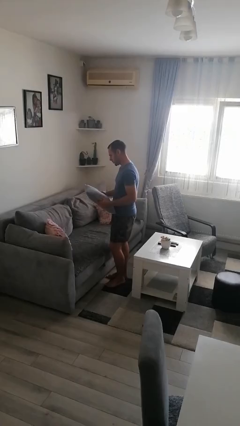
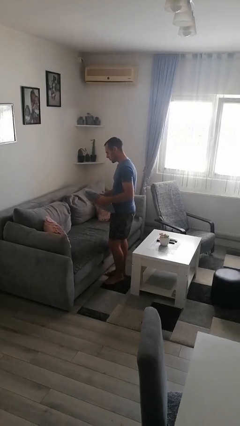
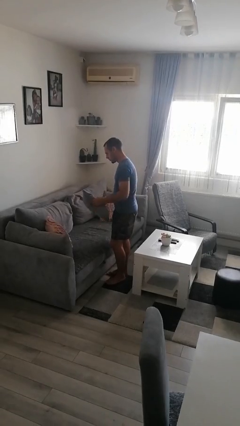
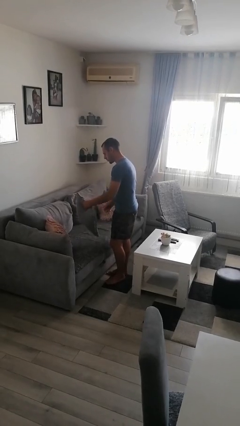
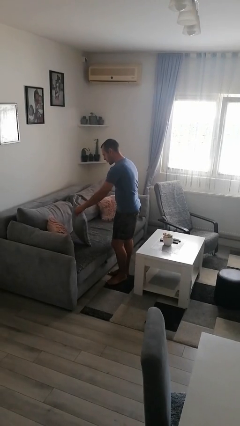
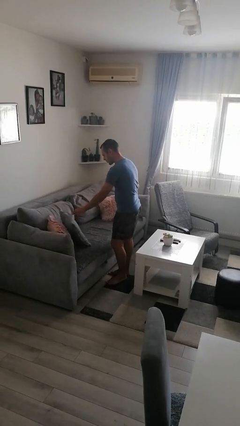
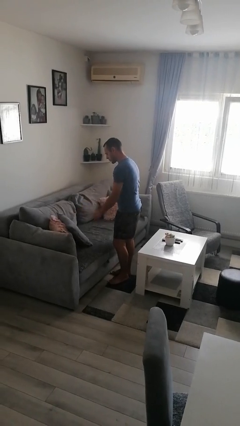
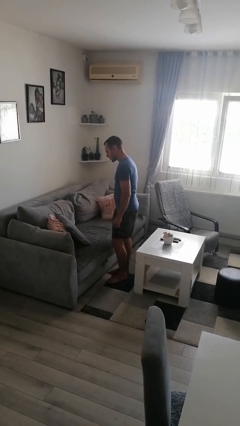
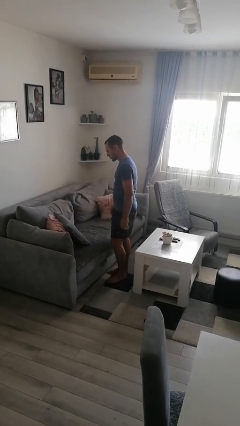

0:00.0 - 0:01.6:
person puts down object on couch

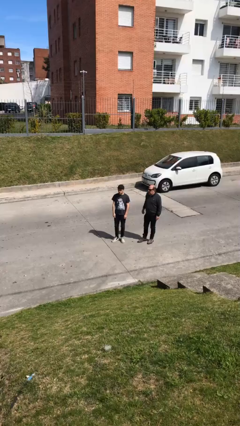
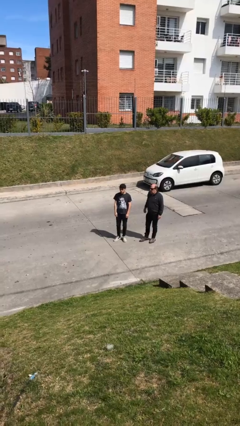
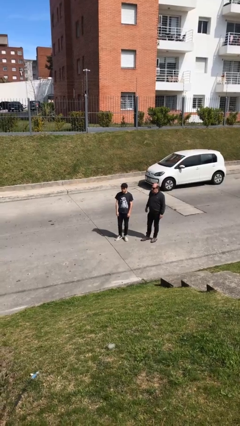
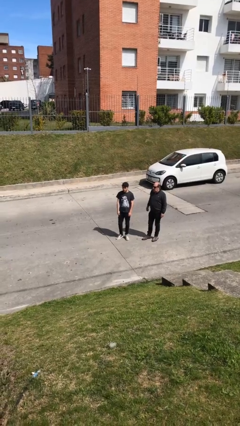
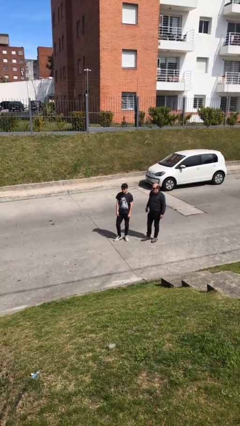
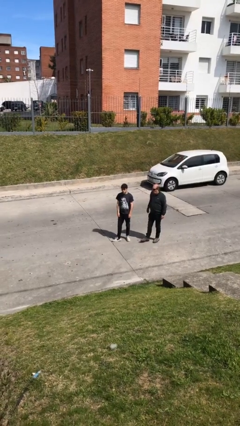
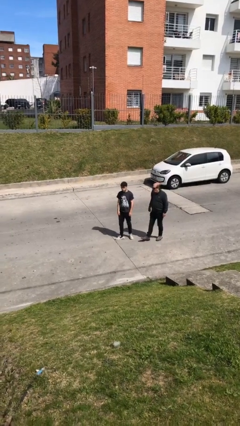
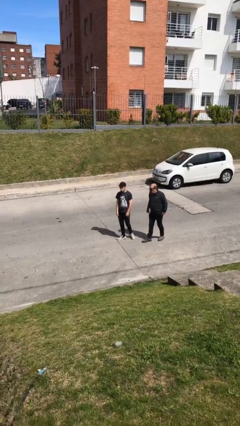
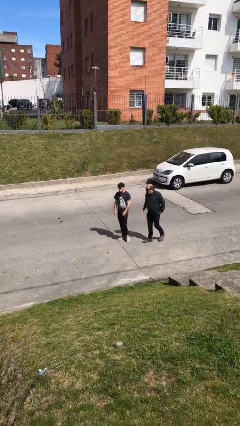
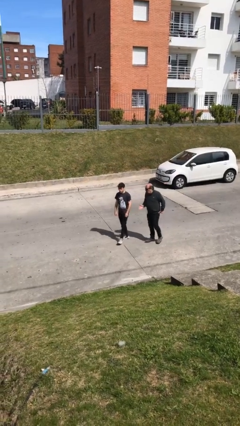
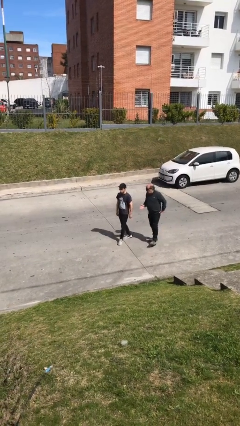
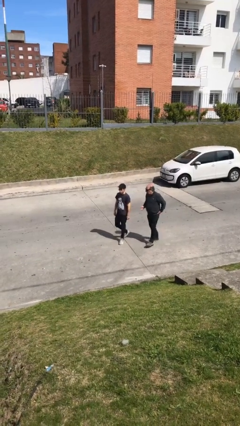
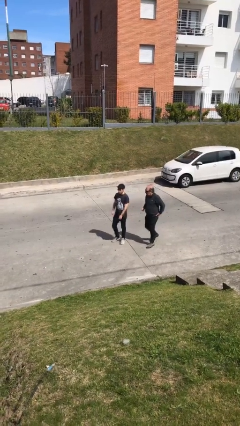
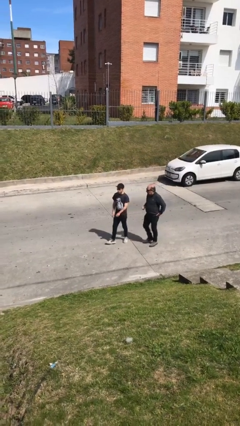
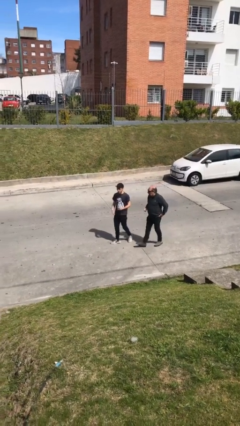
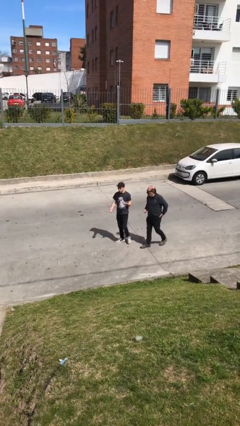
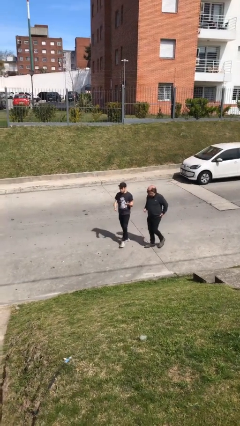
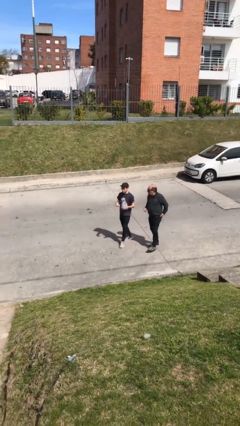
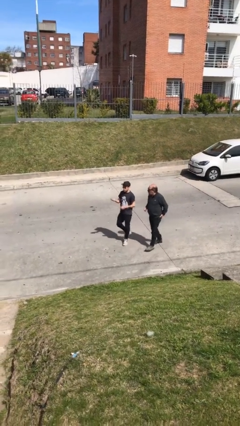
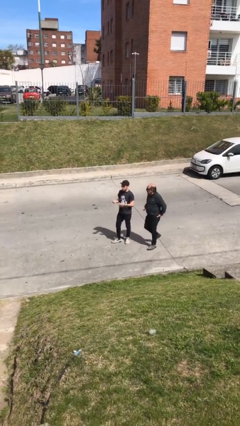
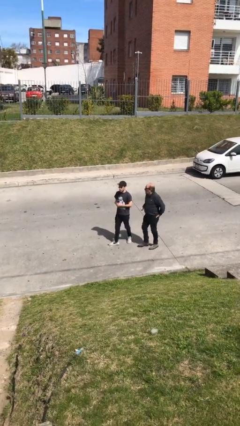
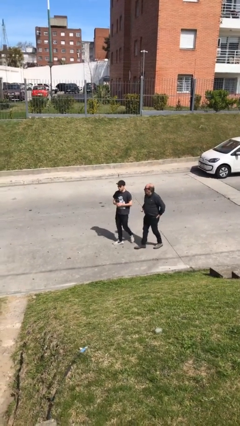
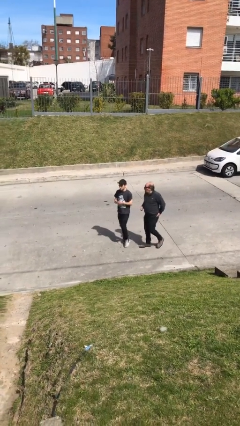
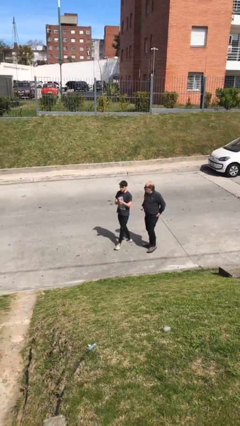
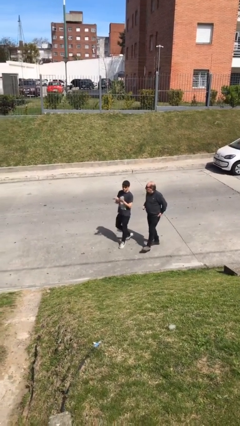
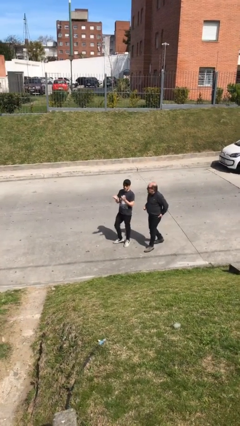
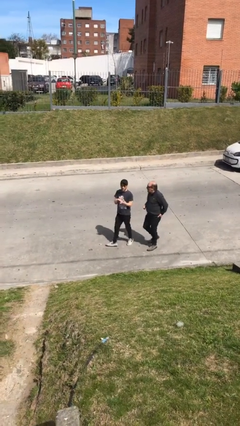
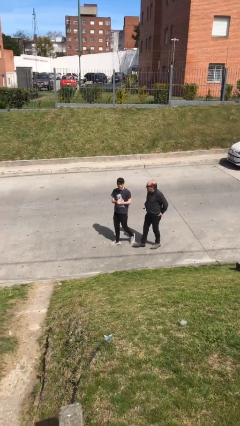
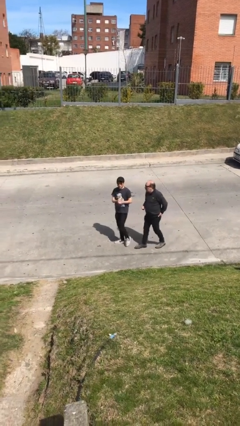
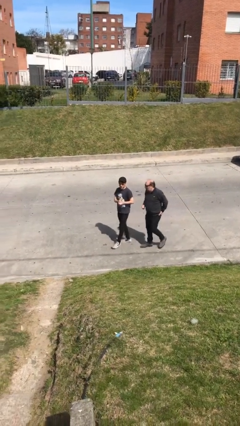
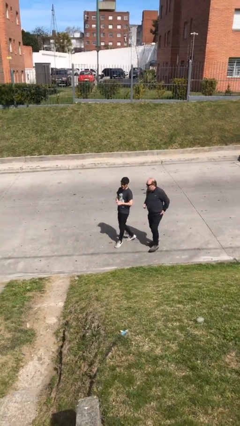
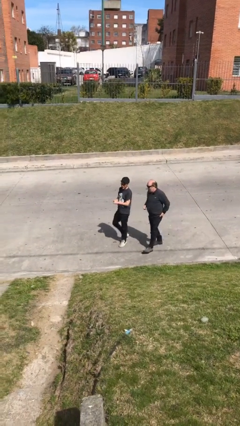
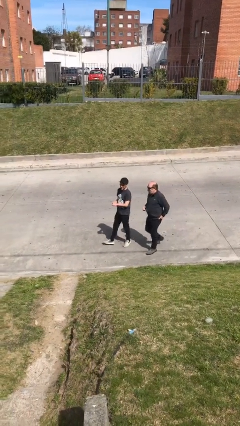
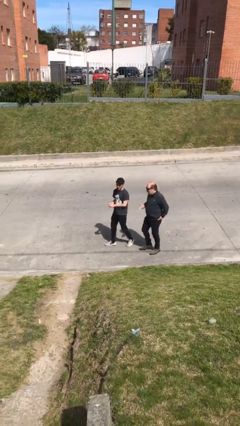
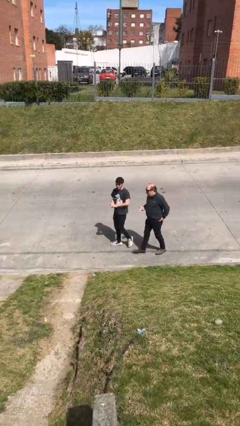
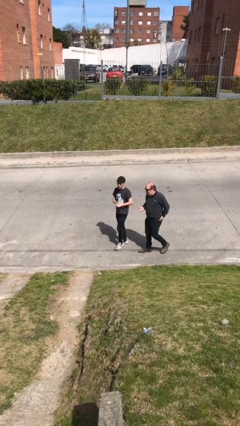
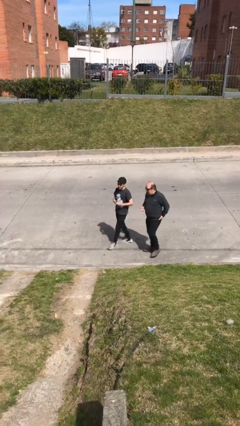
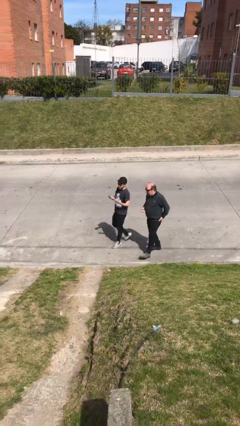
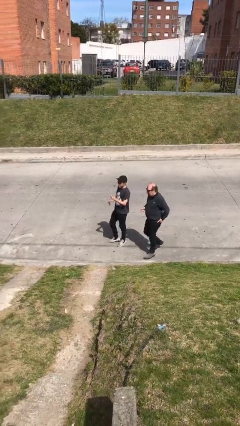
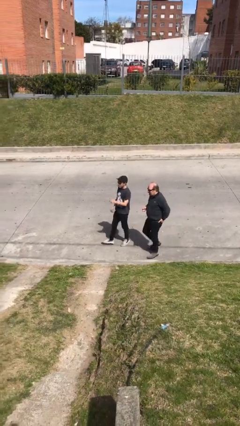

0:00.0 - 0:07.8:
person talks to person

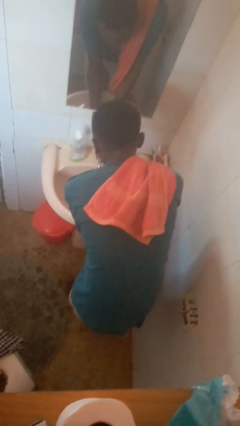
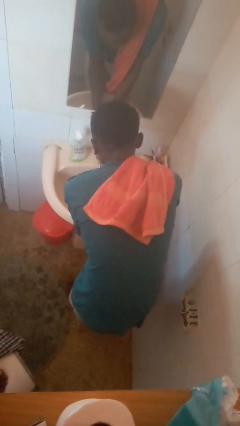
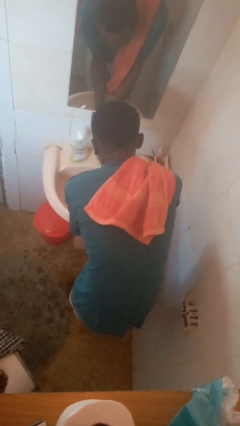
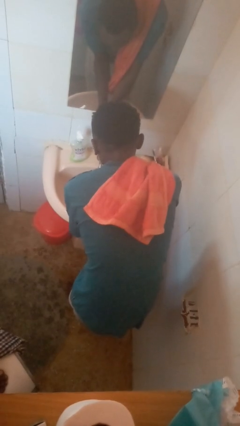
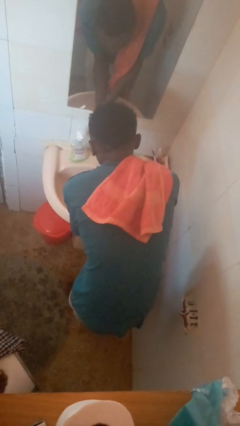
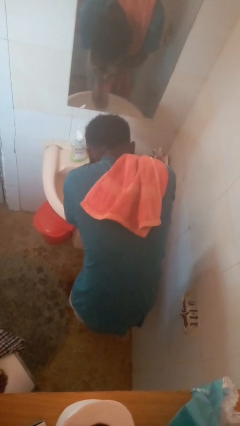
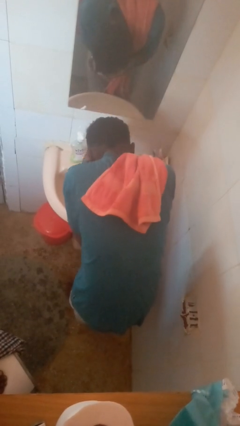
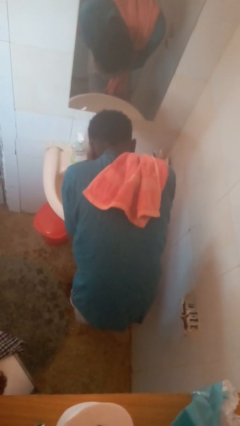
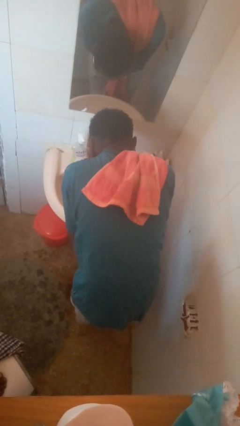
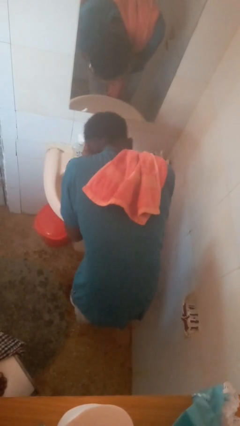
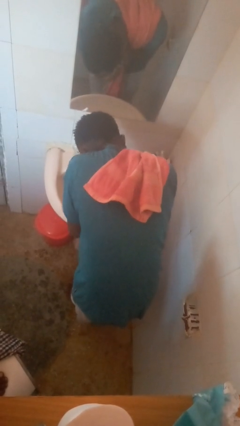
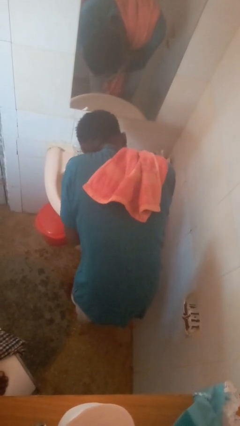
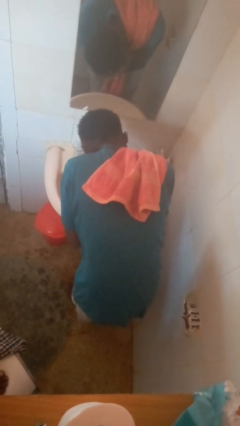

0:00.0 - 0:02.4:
person washes face

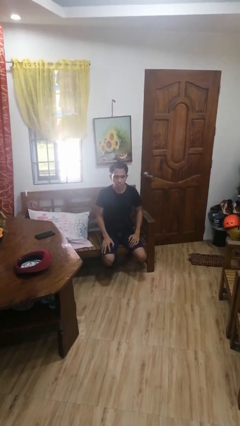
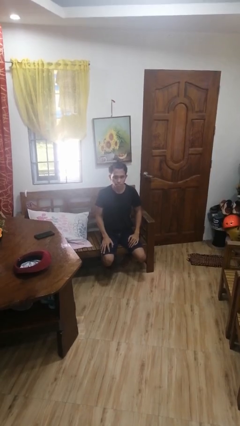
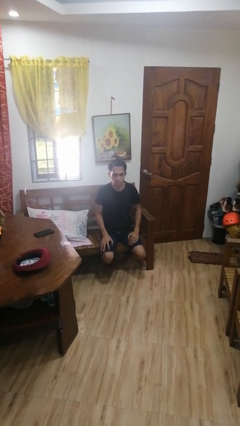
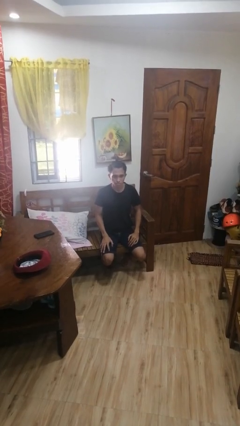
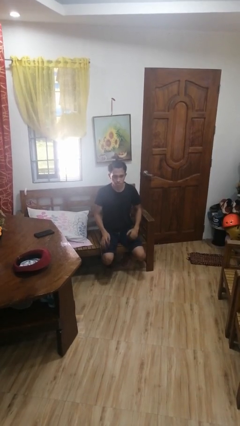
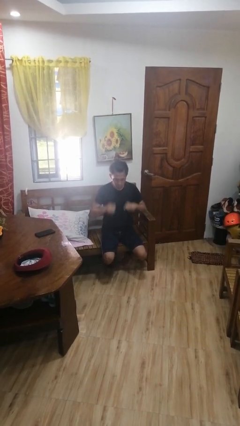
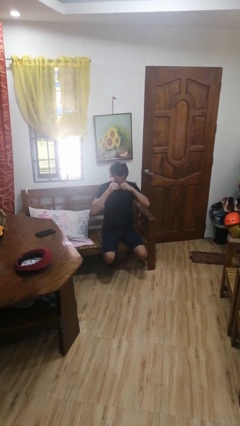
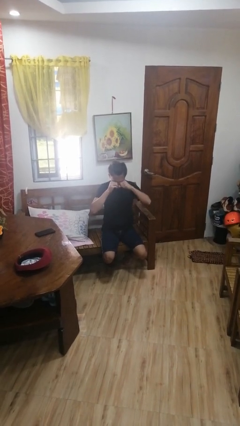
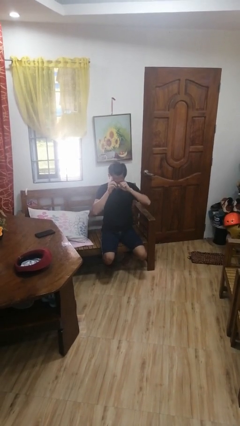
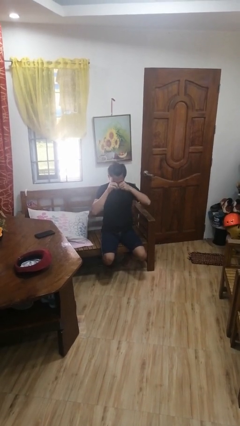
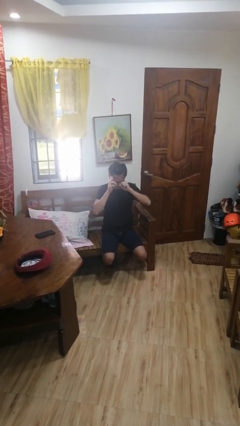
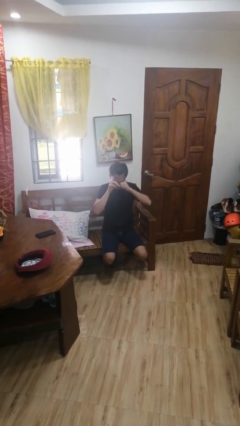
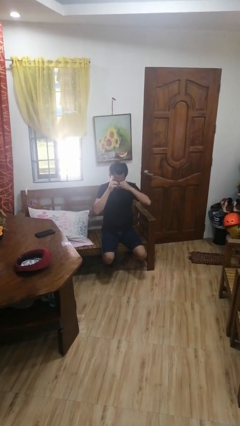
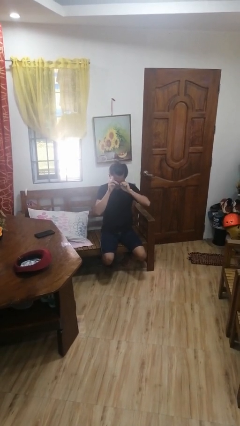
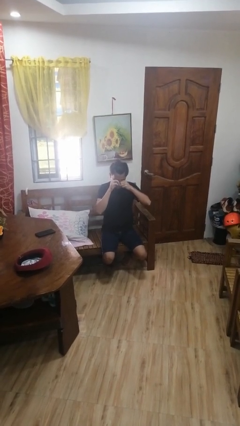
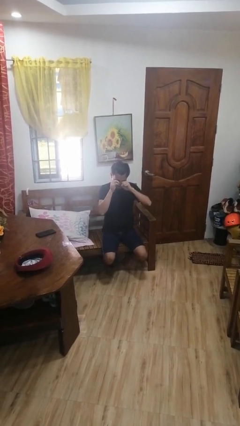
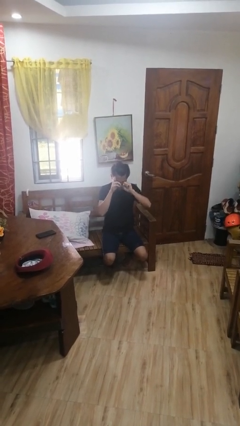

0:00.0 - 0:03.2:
person rubs eyes

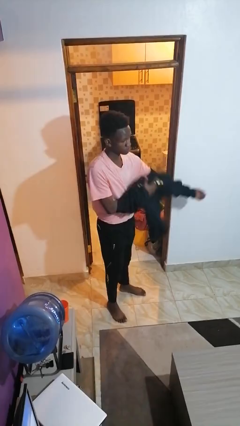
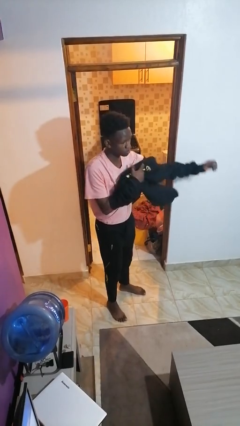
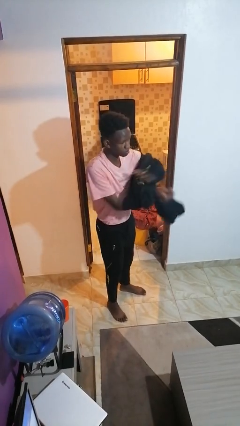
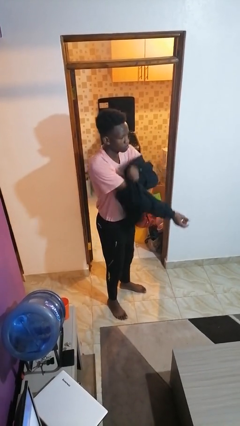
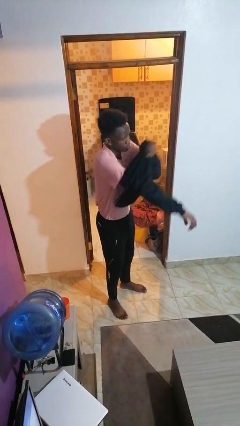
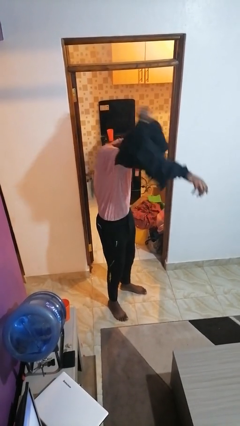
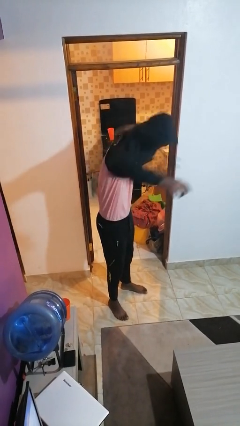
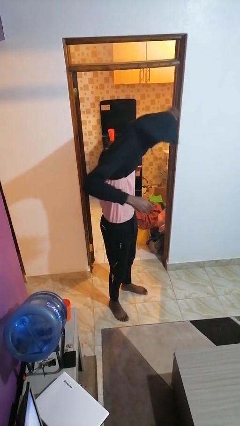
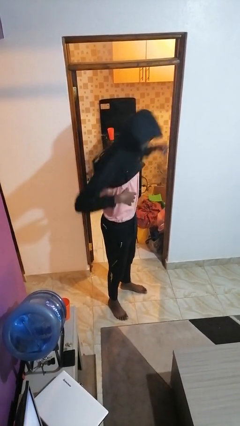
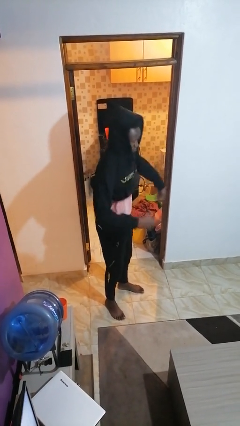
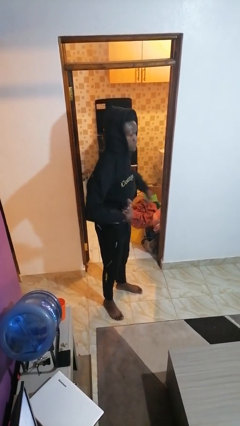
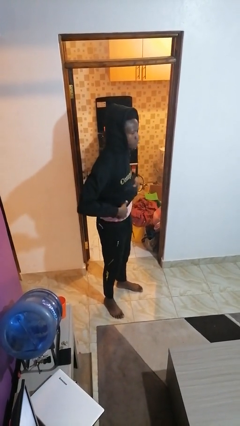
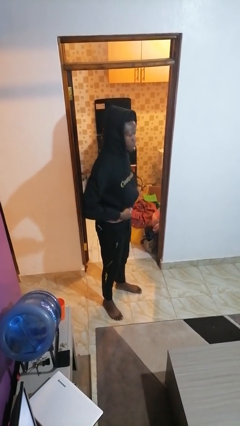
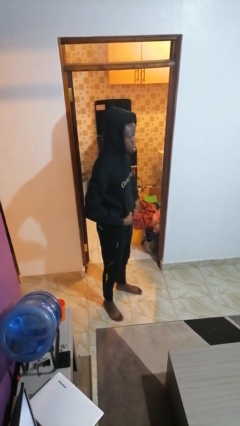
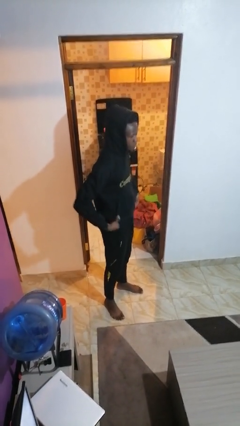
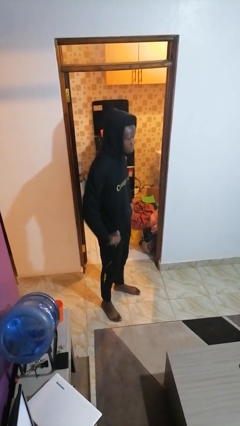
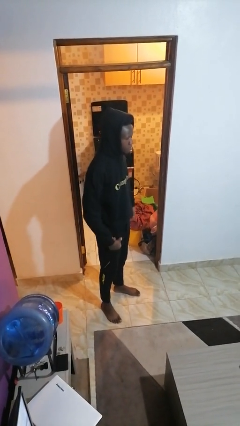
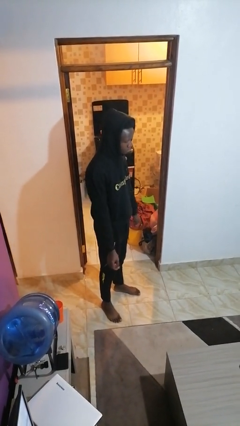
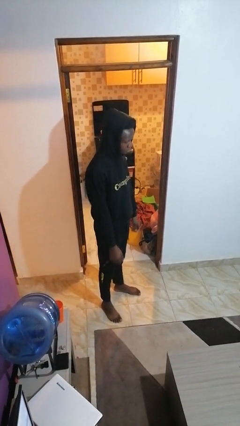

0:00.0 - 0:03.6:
person puts on hoodie
